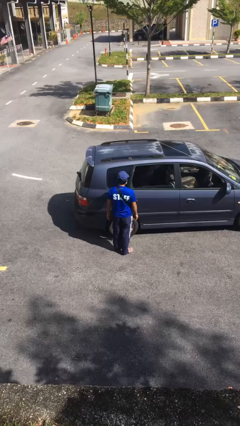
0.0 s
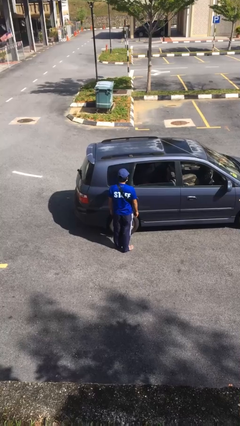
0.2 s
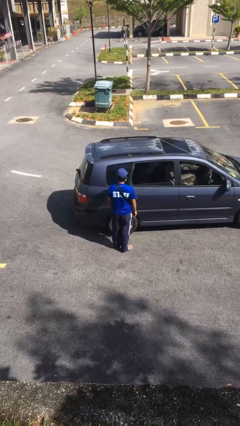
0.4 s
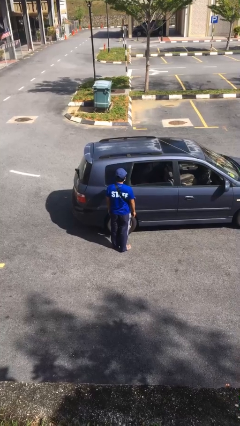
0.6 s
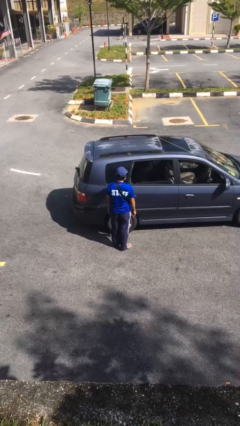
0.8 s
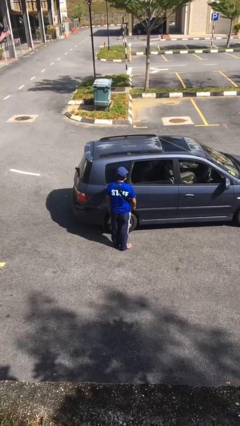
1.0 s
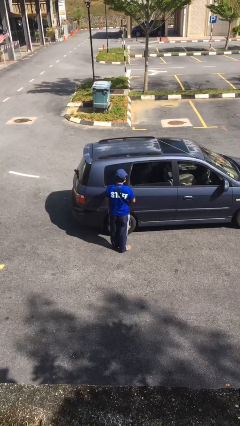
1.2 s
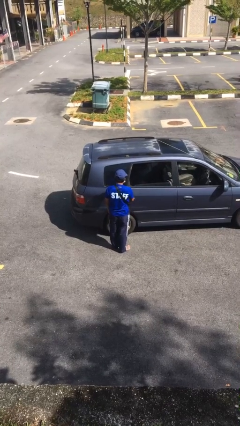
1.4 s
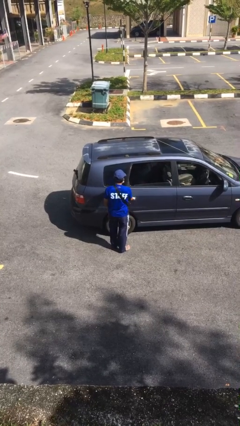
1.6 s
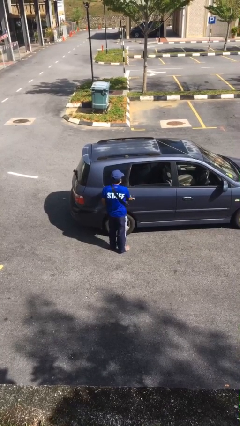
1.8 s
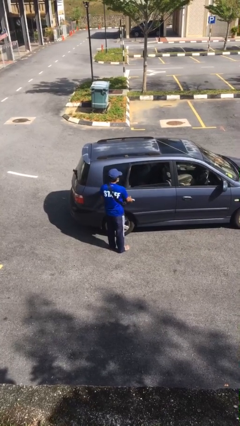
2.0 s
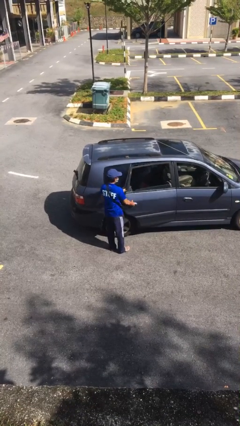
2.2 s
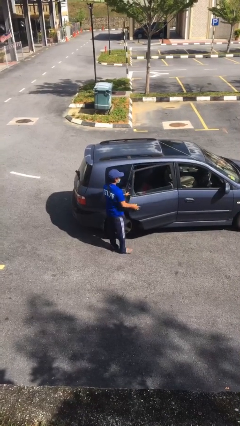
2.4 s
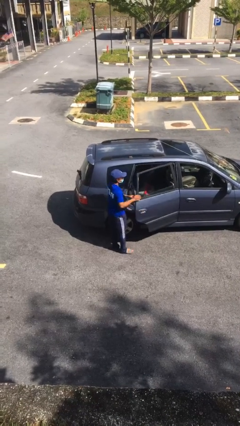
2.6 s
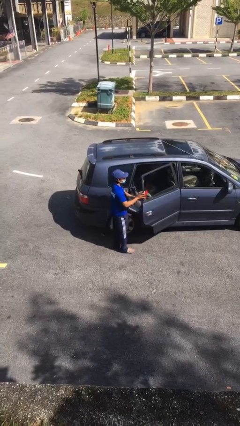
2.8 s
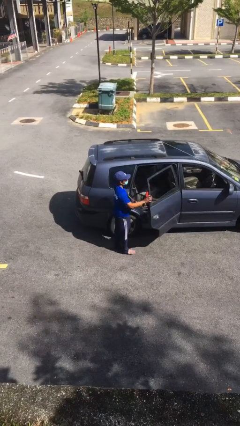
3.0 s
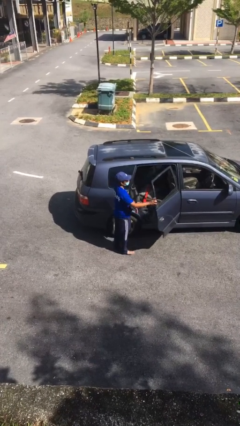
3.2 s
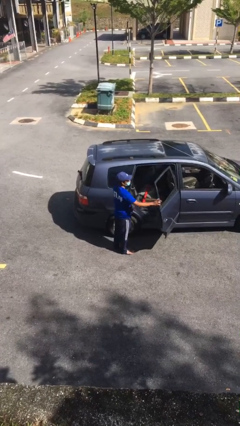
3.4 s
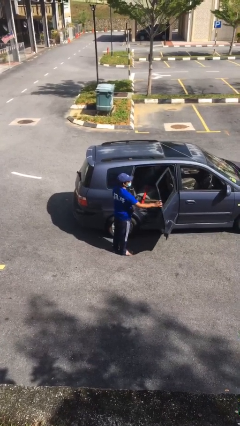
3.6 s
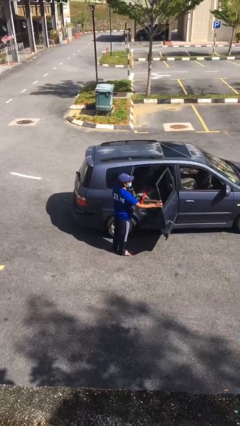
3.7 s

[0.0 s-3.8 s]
person opens car door

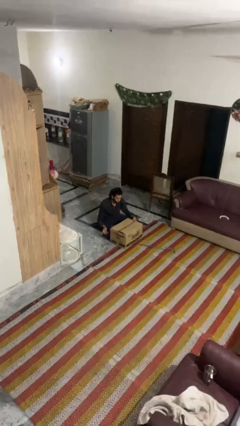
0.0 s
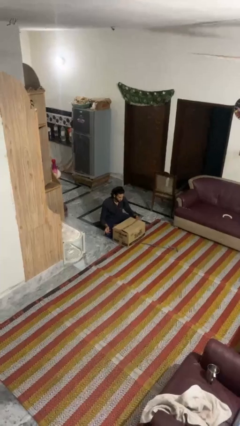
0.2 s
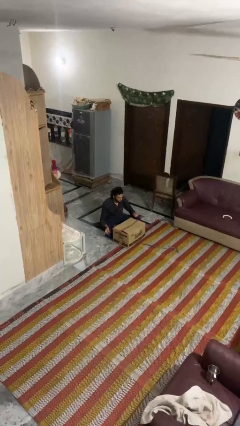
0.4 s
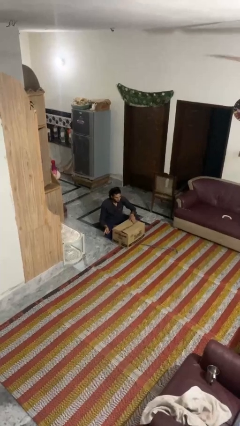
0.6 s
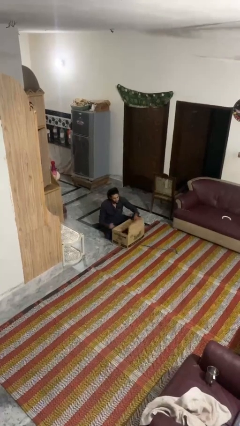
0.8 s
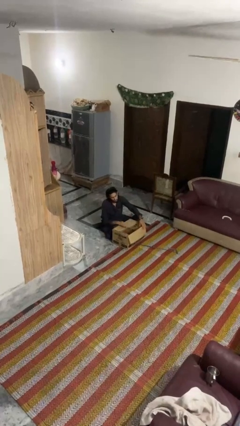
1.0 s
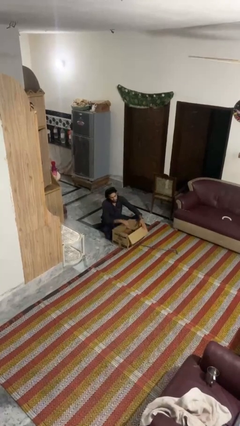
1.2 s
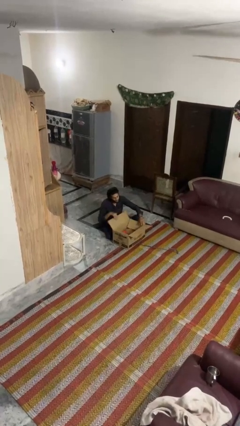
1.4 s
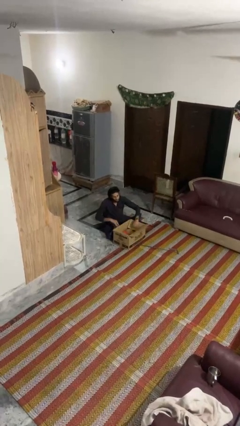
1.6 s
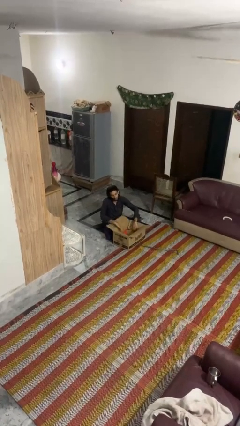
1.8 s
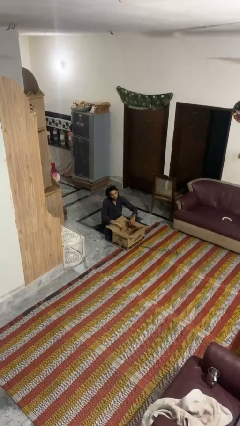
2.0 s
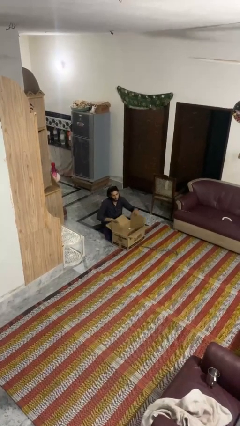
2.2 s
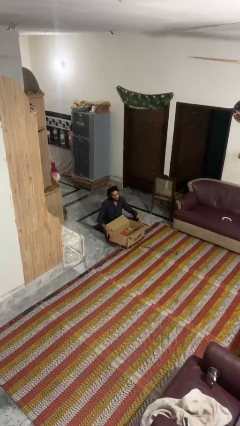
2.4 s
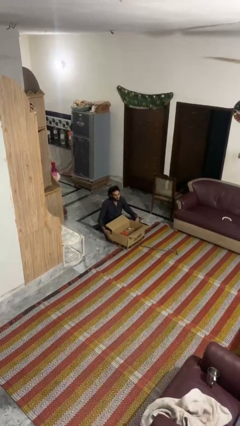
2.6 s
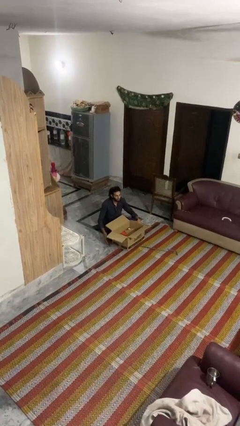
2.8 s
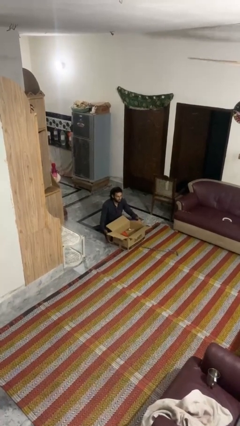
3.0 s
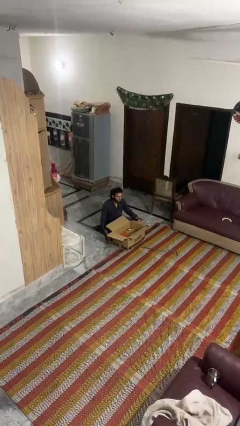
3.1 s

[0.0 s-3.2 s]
person opens box

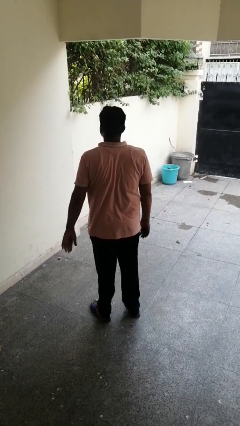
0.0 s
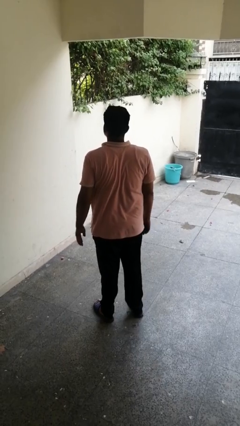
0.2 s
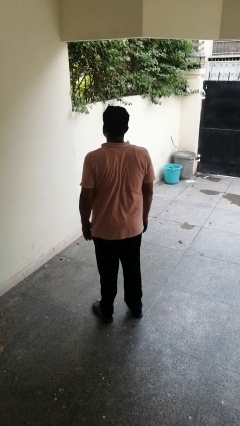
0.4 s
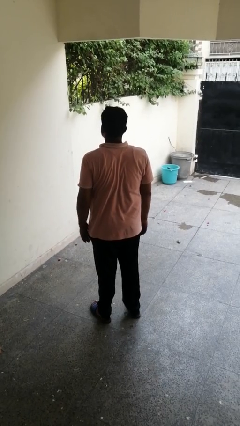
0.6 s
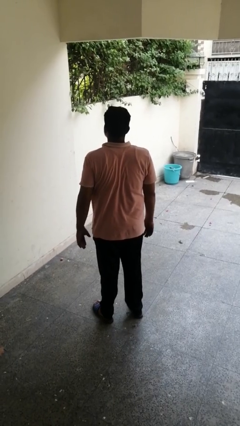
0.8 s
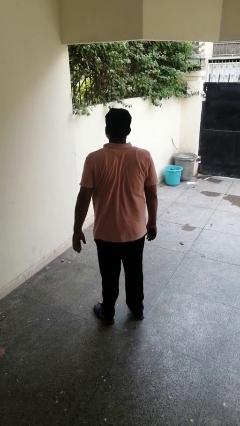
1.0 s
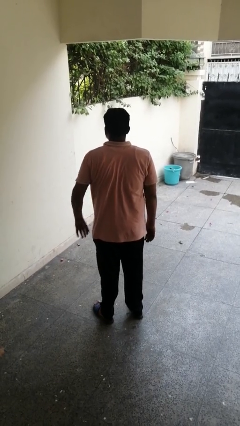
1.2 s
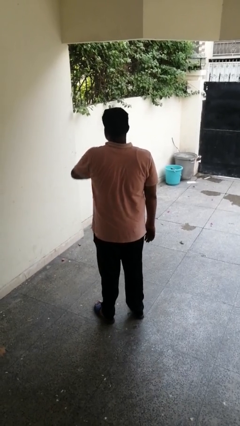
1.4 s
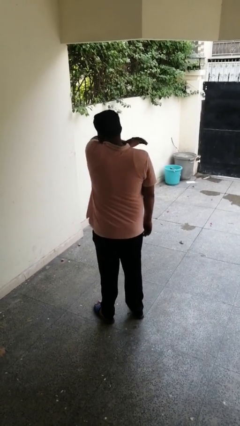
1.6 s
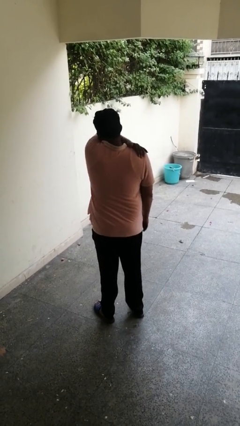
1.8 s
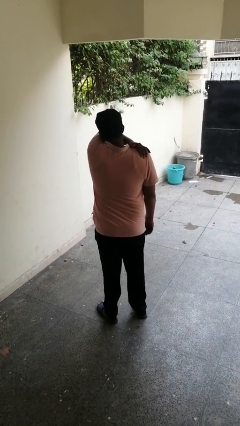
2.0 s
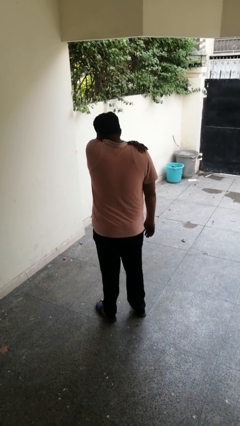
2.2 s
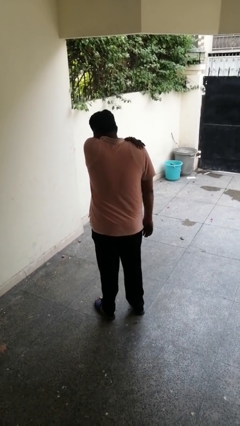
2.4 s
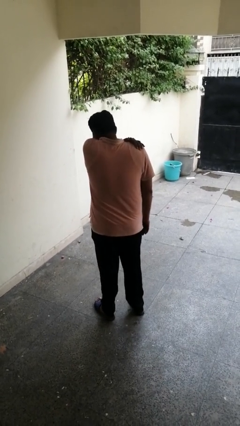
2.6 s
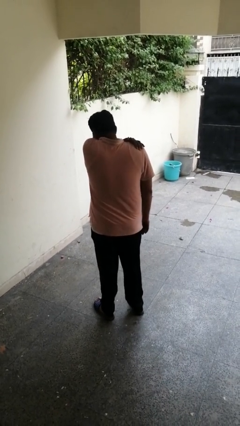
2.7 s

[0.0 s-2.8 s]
person sneezes into arm

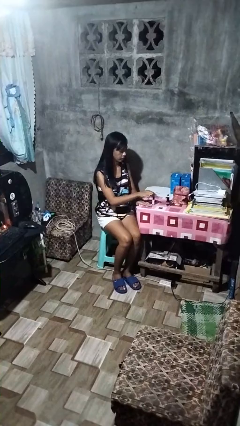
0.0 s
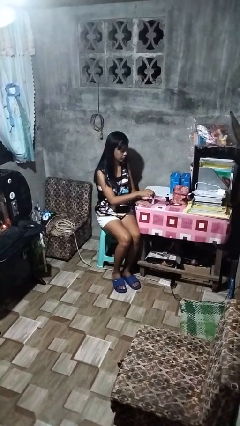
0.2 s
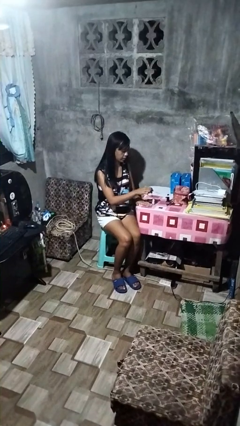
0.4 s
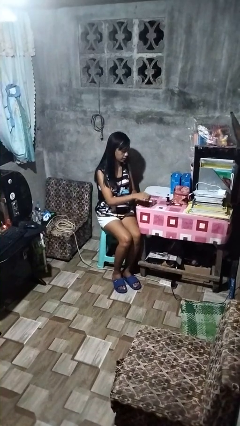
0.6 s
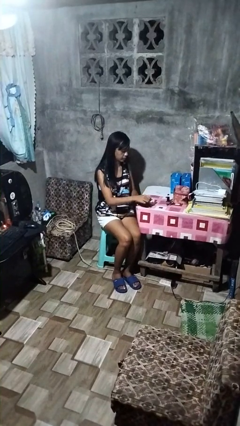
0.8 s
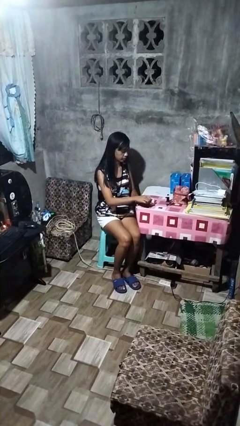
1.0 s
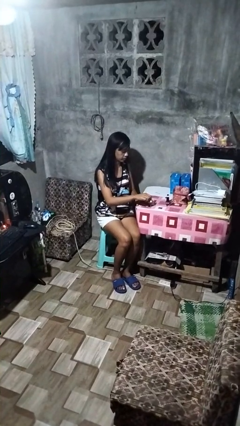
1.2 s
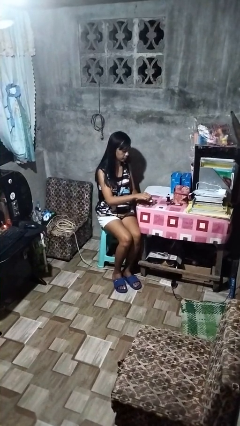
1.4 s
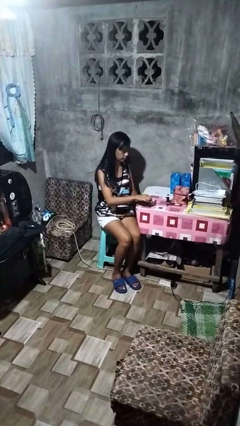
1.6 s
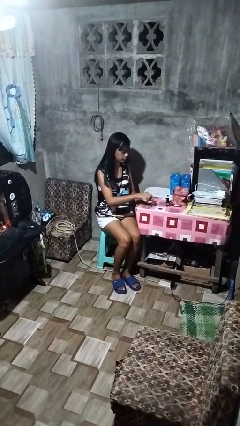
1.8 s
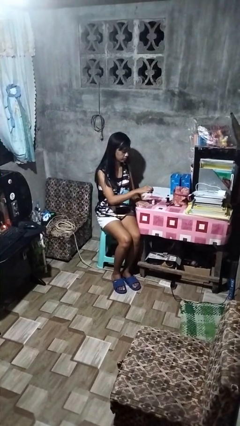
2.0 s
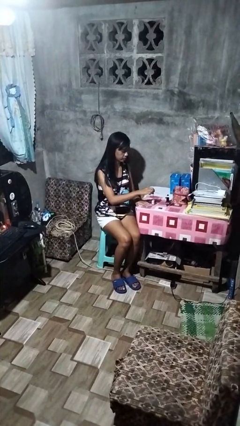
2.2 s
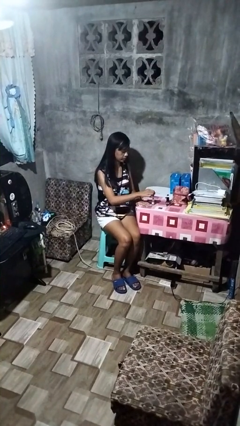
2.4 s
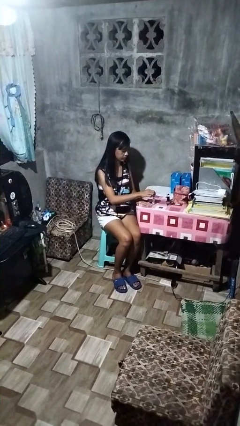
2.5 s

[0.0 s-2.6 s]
person paints fingernails

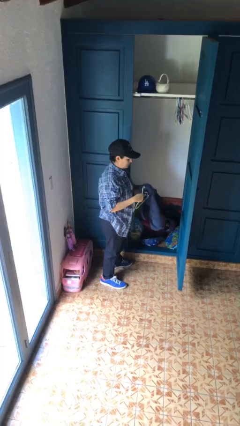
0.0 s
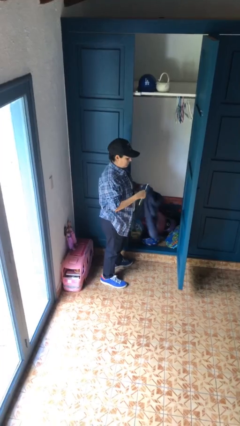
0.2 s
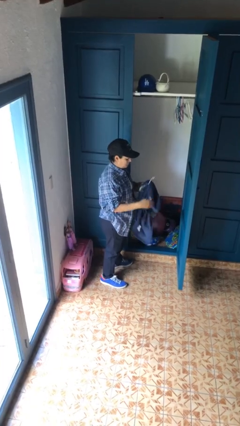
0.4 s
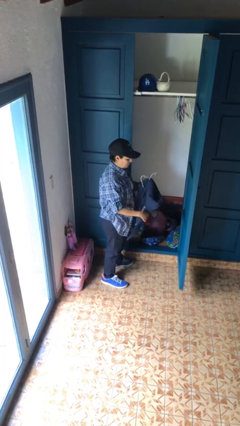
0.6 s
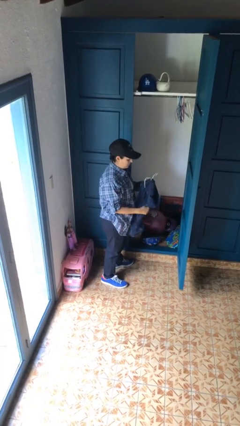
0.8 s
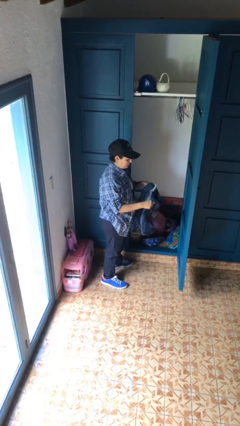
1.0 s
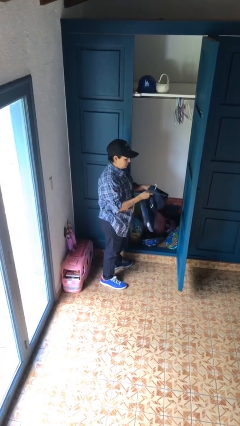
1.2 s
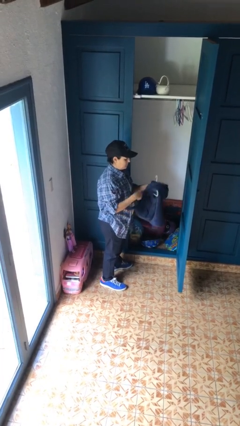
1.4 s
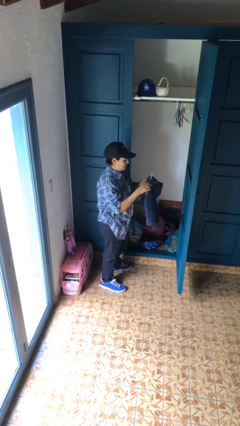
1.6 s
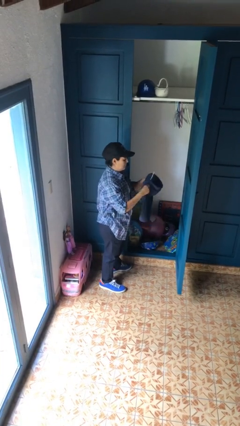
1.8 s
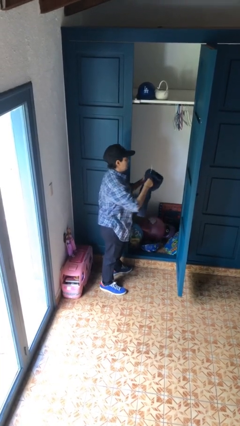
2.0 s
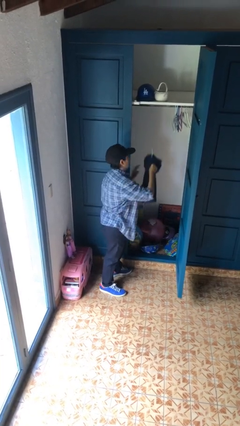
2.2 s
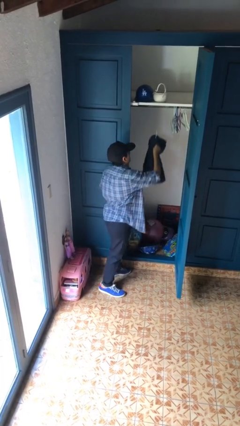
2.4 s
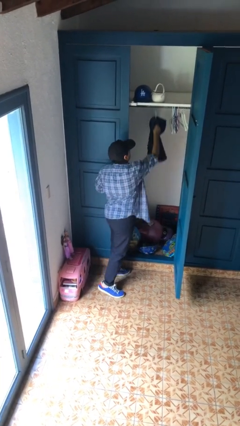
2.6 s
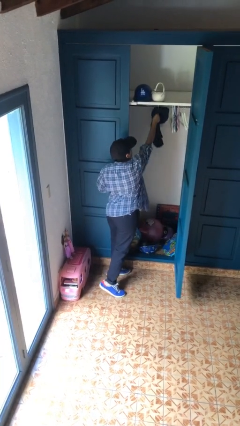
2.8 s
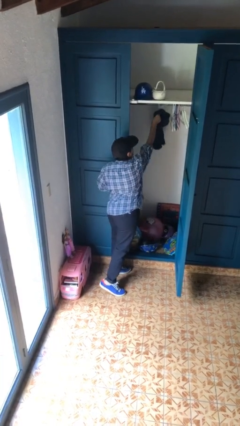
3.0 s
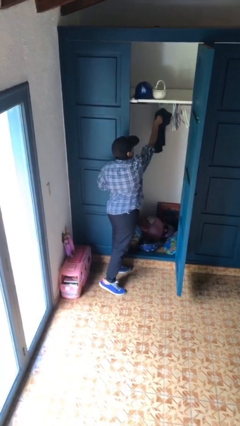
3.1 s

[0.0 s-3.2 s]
person puts clothes into closet

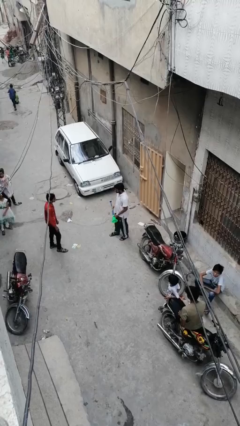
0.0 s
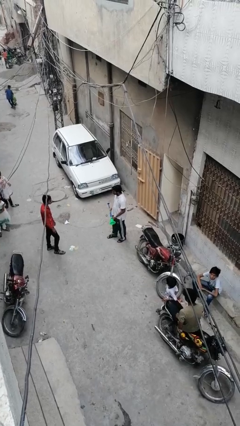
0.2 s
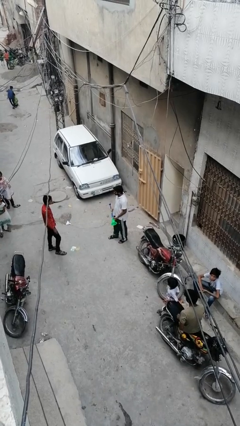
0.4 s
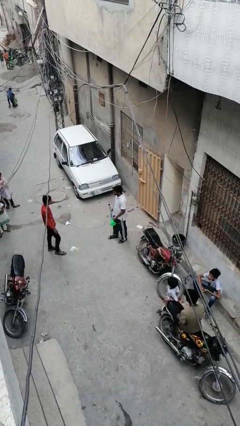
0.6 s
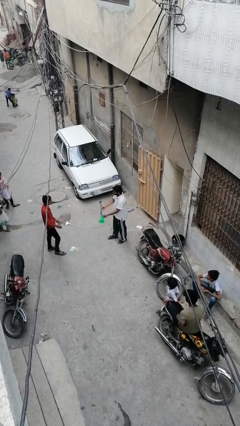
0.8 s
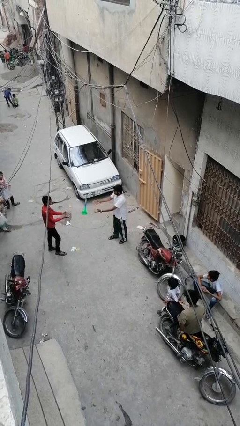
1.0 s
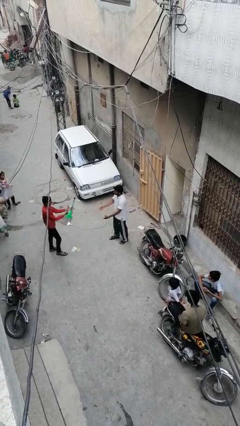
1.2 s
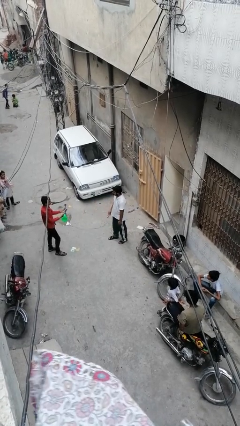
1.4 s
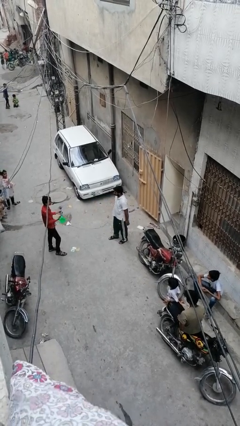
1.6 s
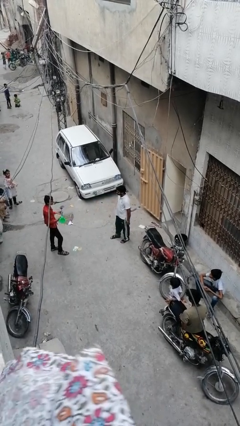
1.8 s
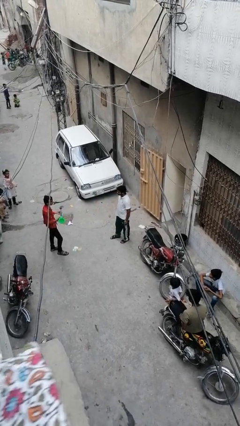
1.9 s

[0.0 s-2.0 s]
person throws object to person

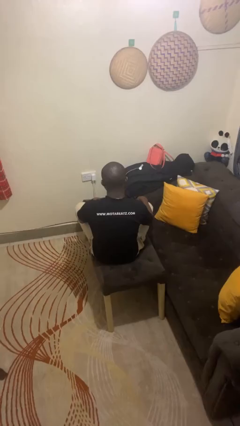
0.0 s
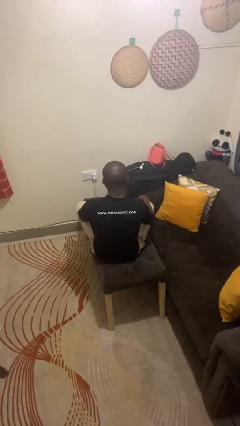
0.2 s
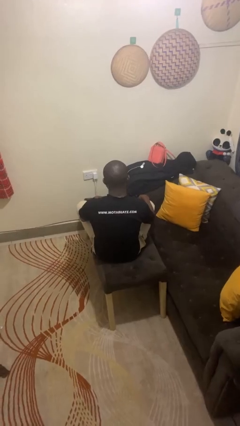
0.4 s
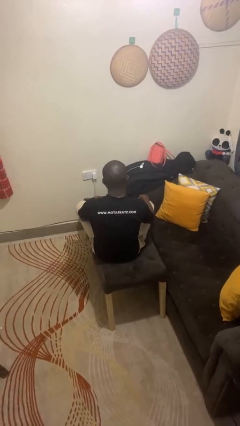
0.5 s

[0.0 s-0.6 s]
person puts fingers in ear
